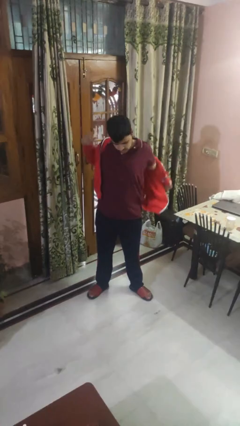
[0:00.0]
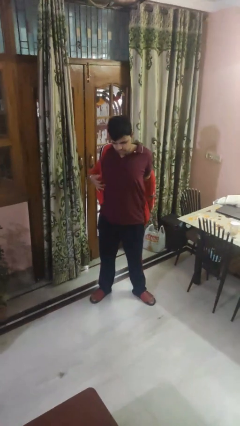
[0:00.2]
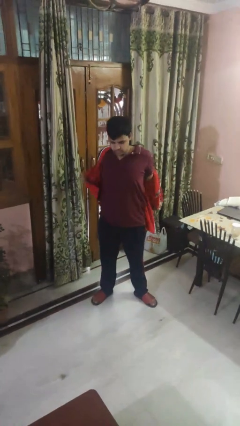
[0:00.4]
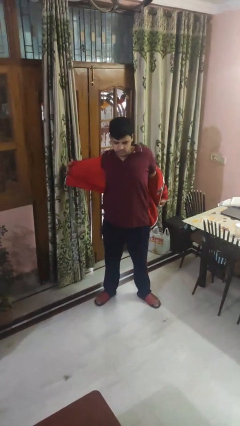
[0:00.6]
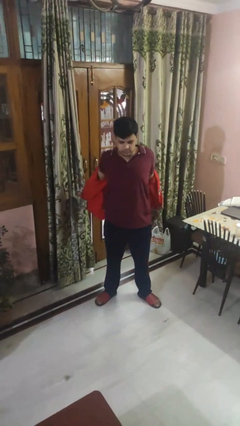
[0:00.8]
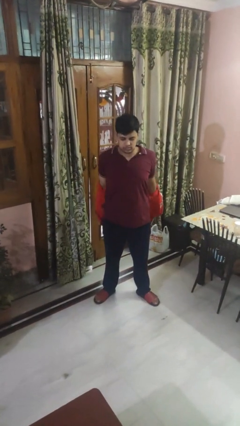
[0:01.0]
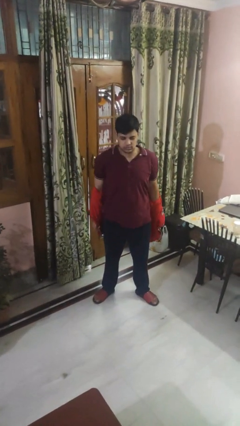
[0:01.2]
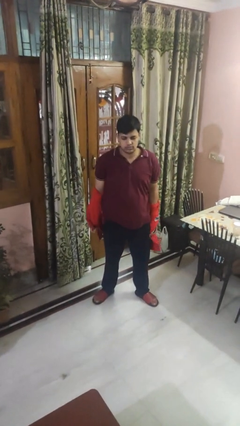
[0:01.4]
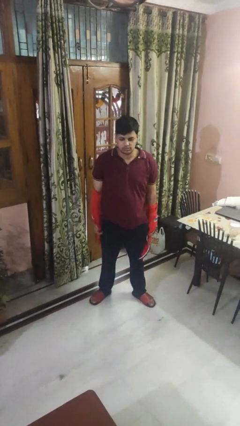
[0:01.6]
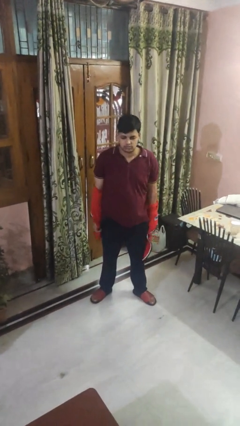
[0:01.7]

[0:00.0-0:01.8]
person takes off hoodie

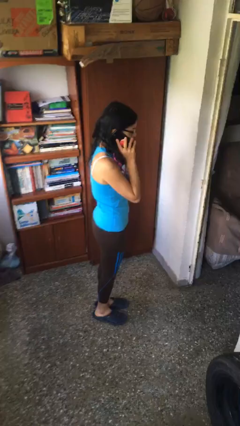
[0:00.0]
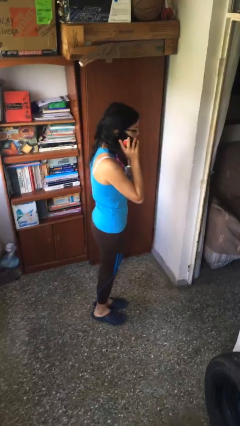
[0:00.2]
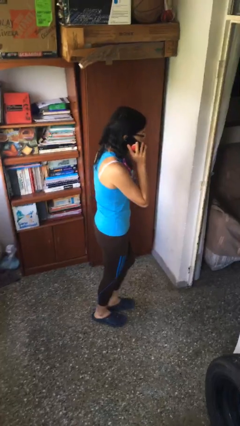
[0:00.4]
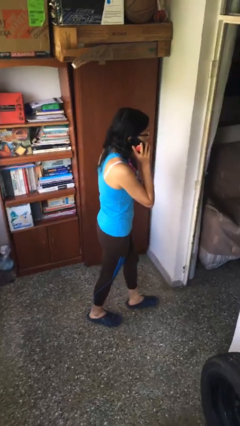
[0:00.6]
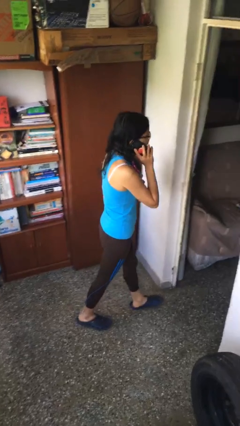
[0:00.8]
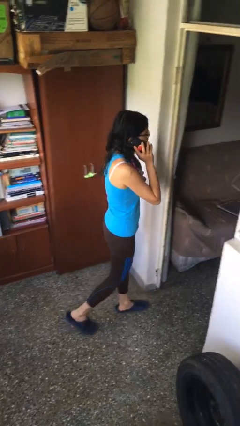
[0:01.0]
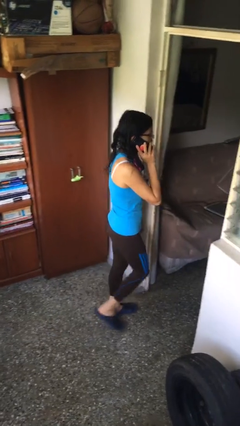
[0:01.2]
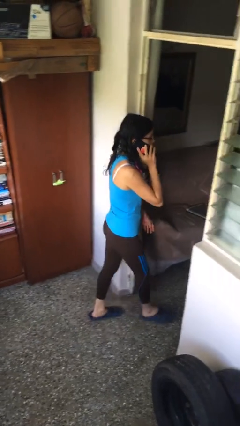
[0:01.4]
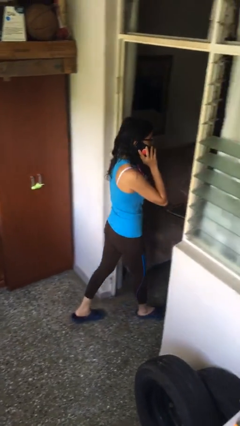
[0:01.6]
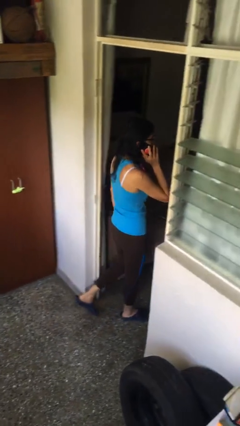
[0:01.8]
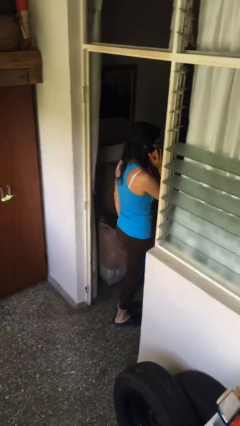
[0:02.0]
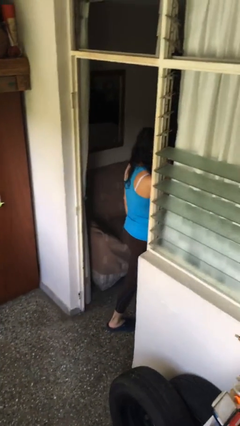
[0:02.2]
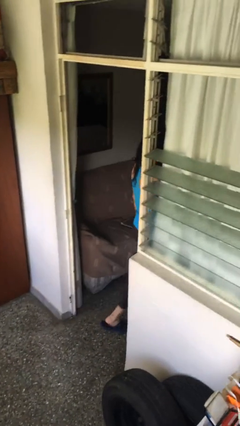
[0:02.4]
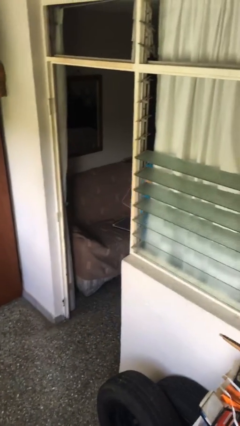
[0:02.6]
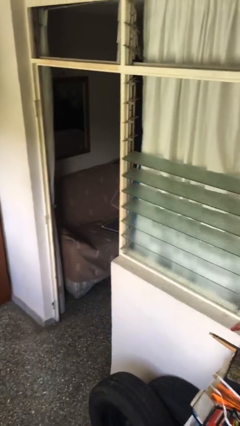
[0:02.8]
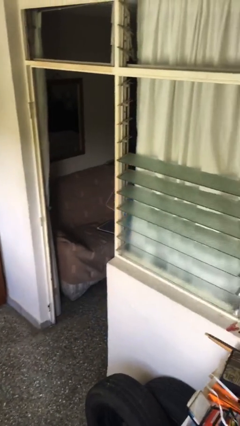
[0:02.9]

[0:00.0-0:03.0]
person exits scene through structure

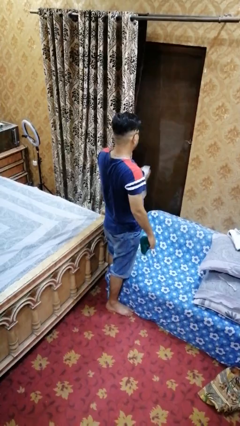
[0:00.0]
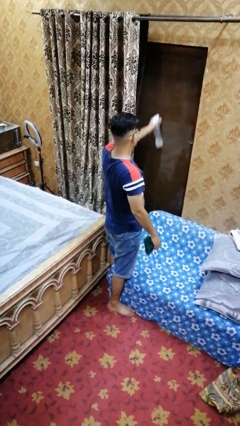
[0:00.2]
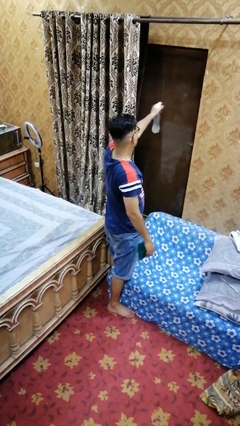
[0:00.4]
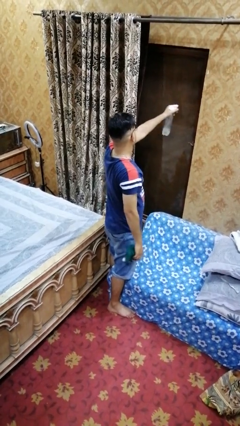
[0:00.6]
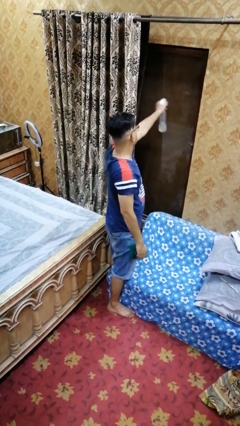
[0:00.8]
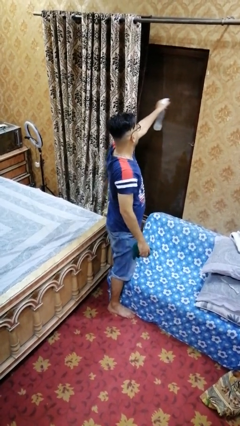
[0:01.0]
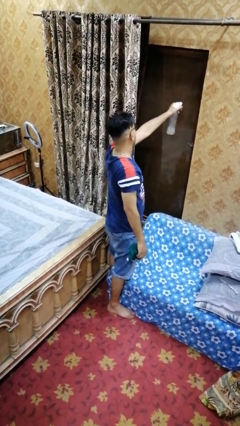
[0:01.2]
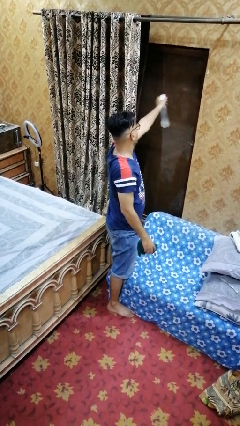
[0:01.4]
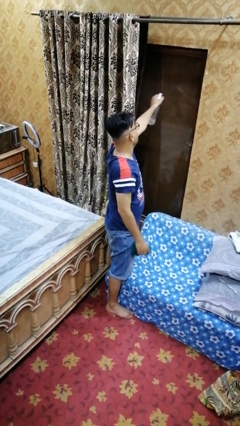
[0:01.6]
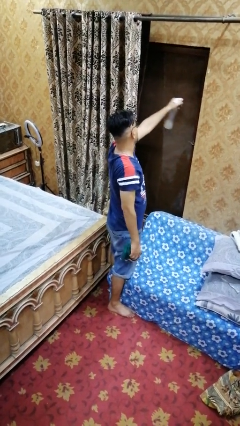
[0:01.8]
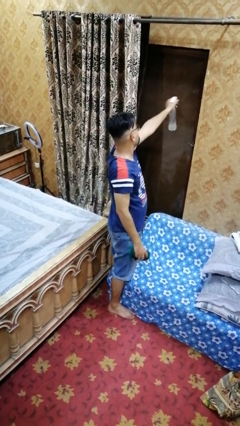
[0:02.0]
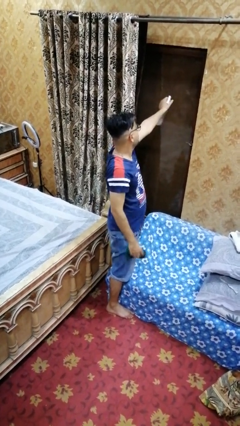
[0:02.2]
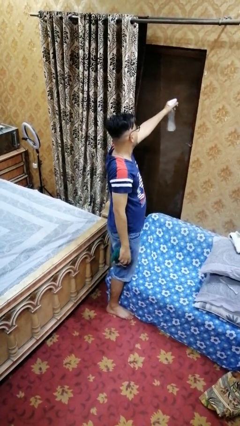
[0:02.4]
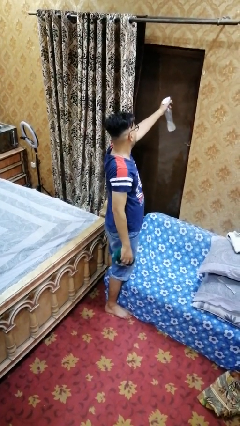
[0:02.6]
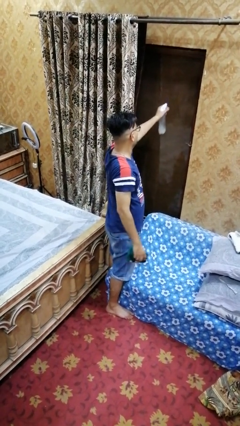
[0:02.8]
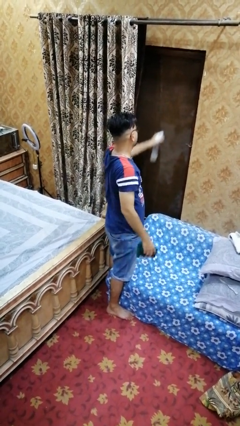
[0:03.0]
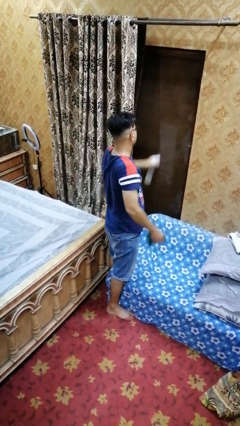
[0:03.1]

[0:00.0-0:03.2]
person sprays from bottle

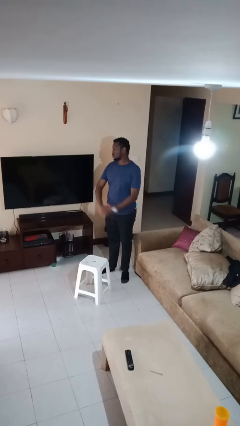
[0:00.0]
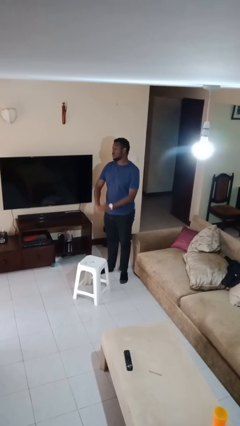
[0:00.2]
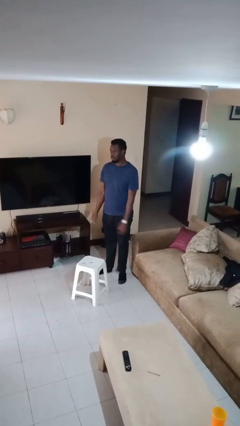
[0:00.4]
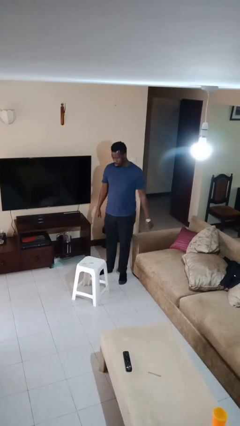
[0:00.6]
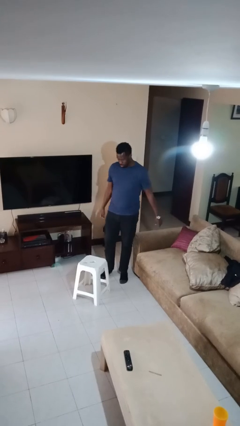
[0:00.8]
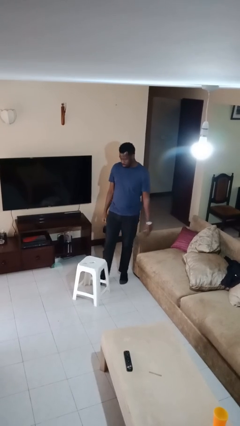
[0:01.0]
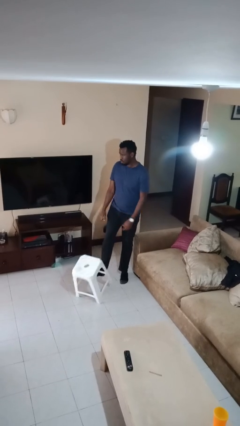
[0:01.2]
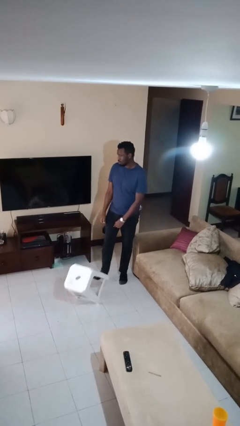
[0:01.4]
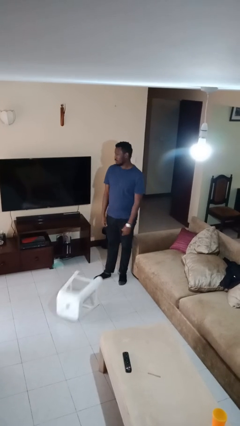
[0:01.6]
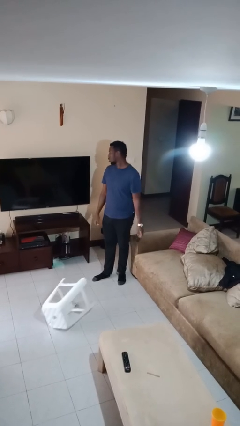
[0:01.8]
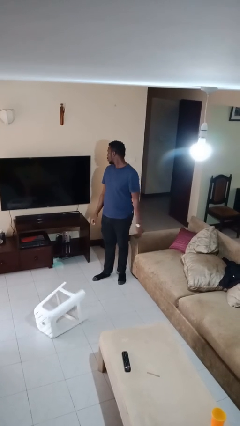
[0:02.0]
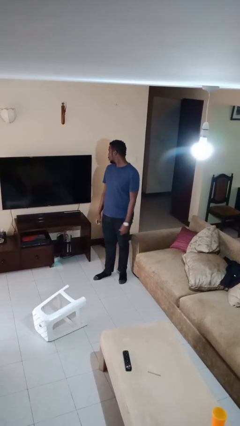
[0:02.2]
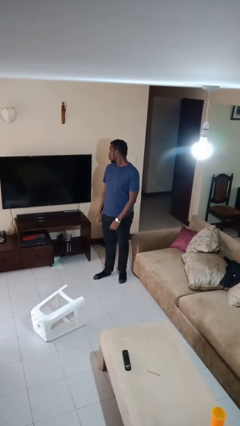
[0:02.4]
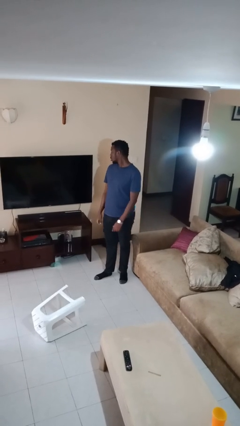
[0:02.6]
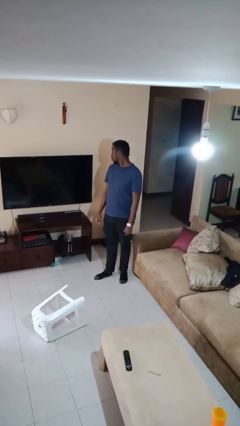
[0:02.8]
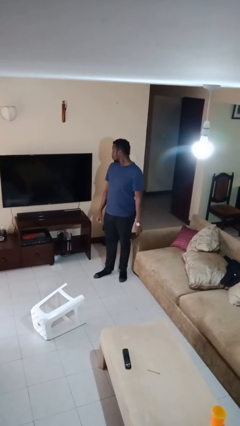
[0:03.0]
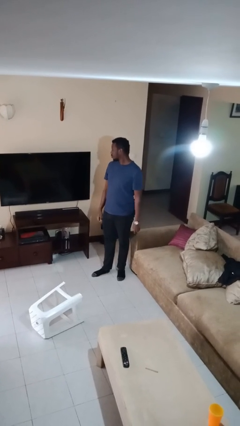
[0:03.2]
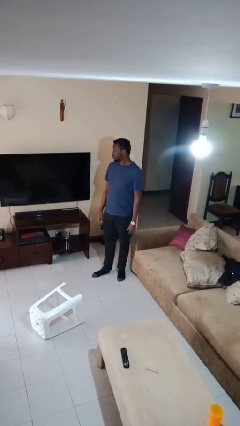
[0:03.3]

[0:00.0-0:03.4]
person knocks over furniture

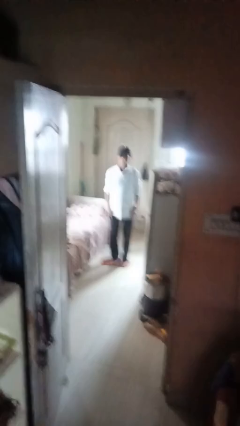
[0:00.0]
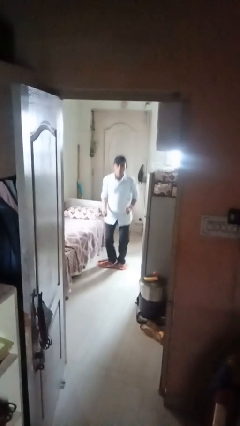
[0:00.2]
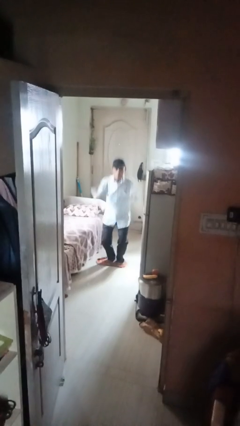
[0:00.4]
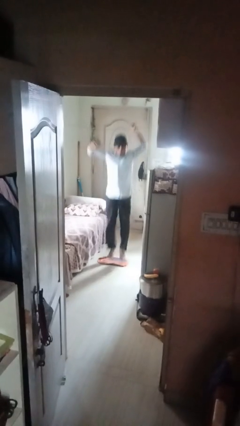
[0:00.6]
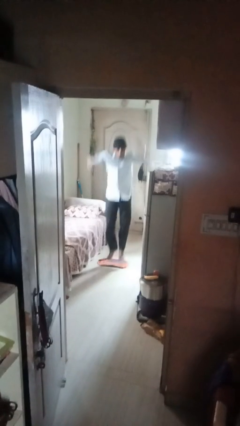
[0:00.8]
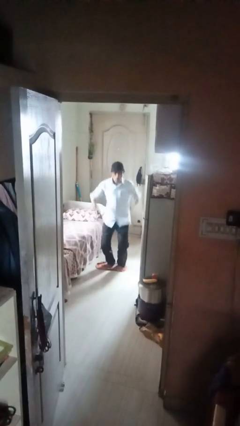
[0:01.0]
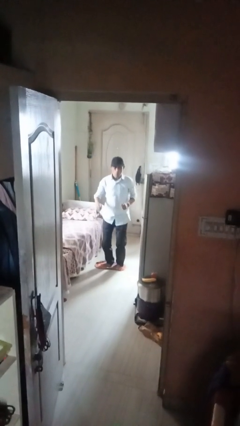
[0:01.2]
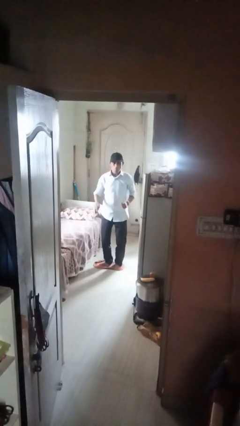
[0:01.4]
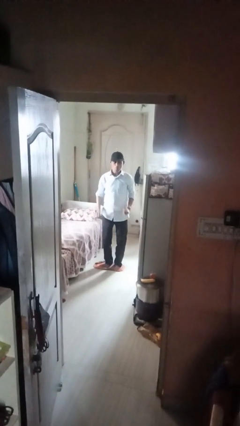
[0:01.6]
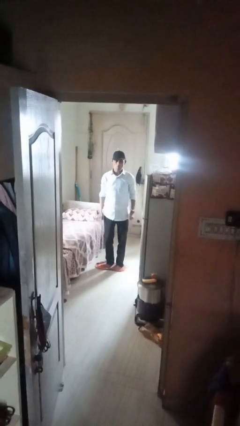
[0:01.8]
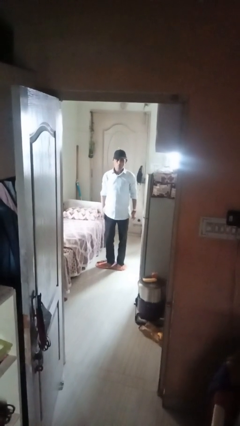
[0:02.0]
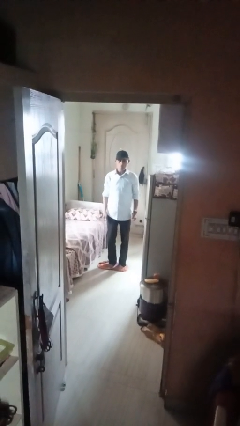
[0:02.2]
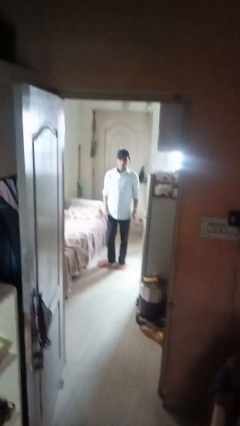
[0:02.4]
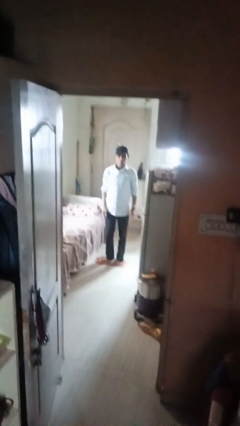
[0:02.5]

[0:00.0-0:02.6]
person jumps

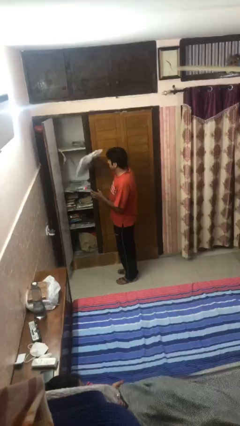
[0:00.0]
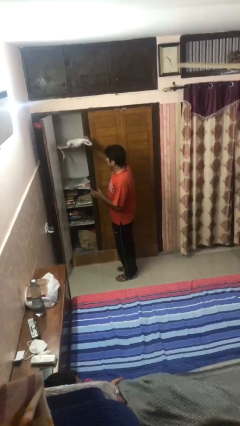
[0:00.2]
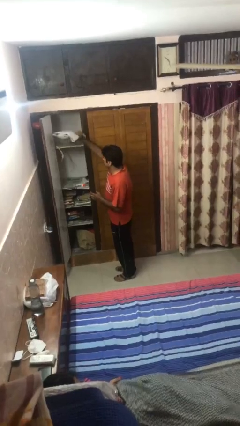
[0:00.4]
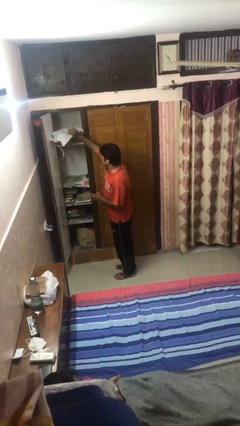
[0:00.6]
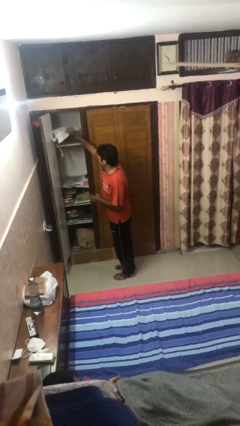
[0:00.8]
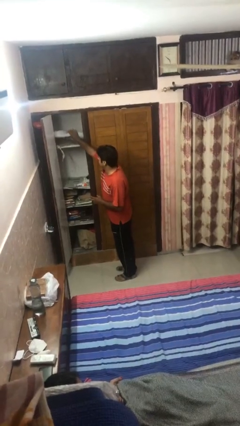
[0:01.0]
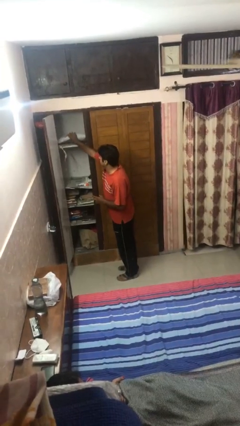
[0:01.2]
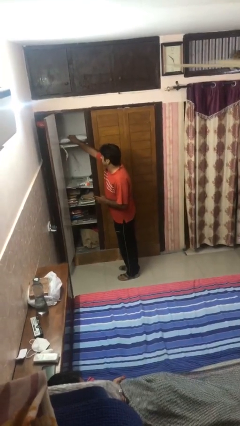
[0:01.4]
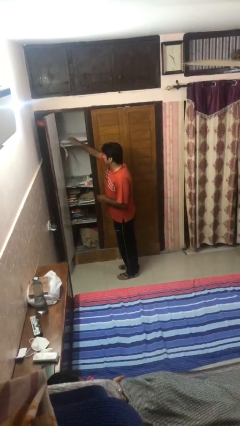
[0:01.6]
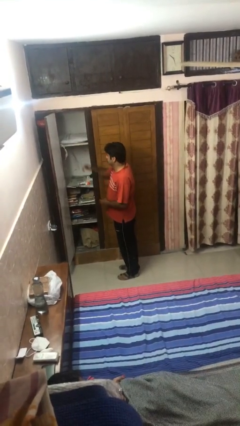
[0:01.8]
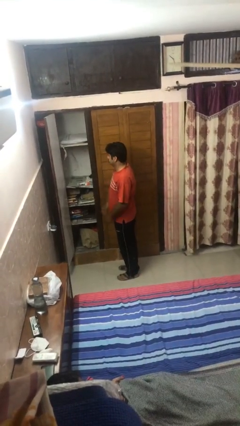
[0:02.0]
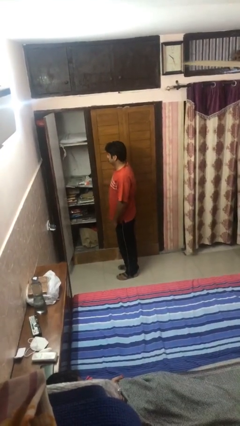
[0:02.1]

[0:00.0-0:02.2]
person puts down object on shelf

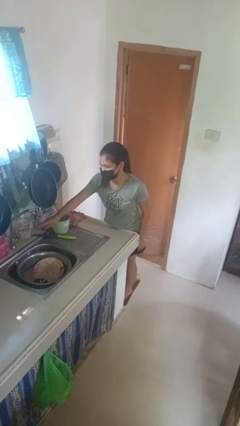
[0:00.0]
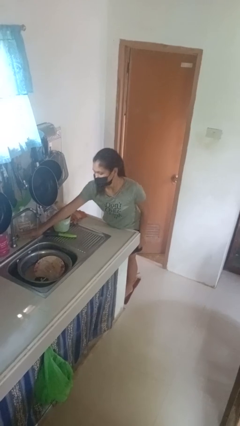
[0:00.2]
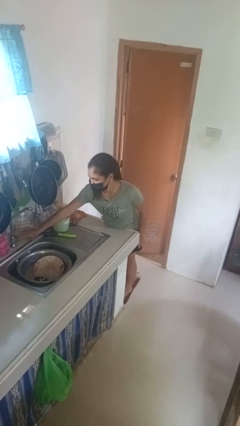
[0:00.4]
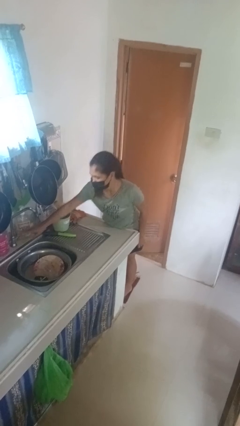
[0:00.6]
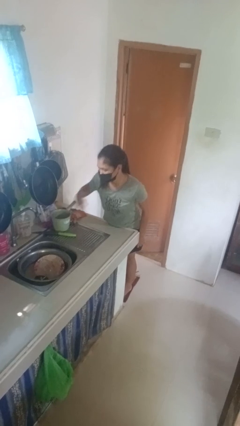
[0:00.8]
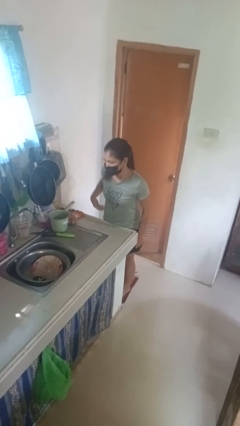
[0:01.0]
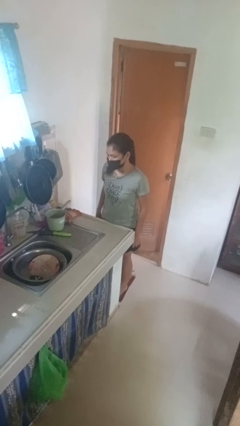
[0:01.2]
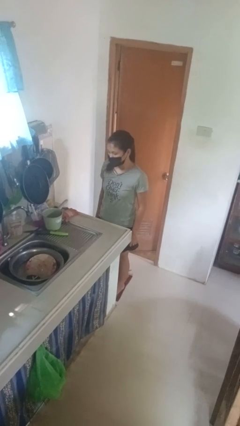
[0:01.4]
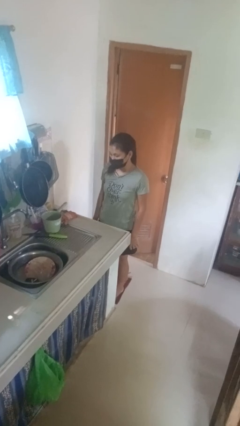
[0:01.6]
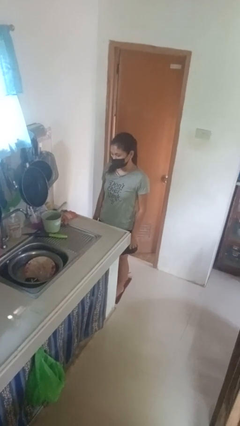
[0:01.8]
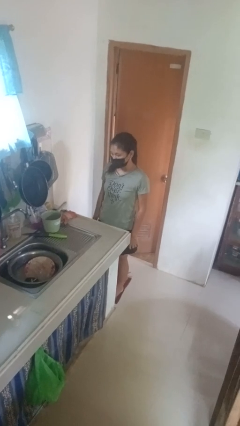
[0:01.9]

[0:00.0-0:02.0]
person turns off faucet
